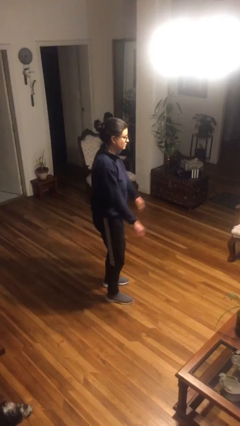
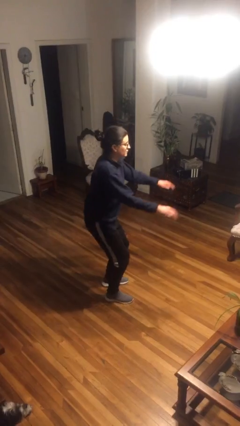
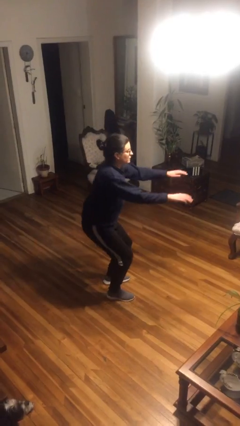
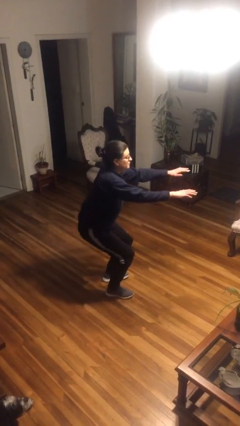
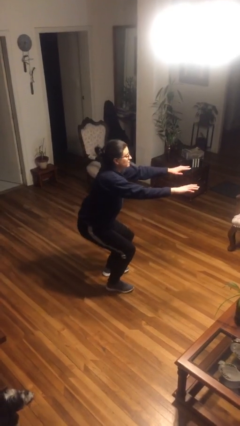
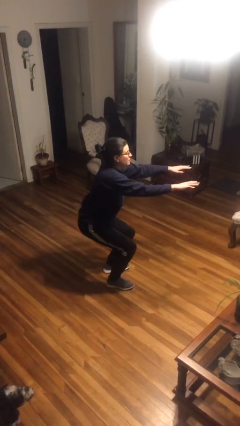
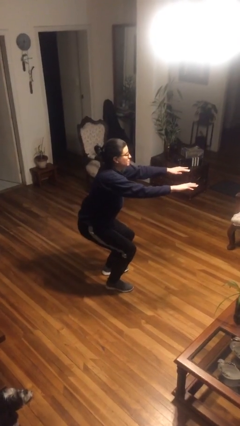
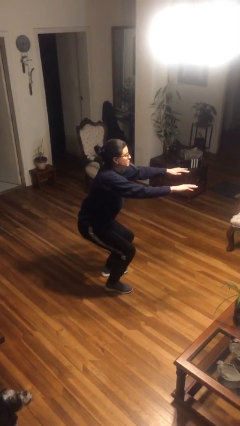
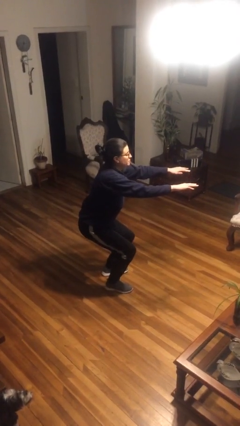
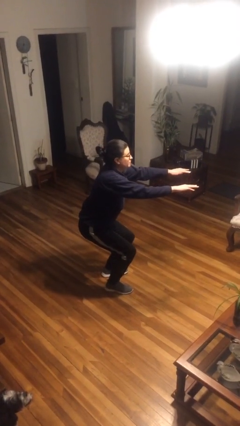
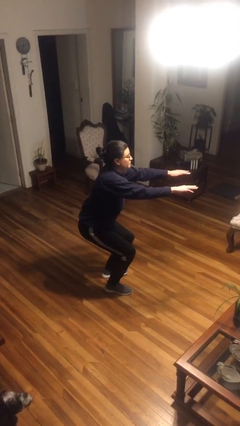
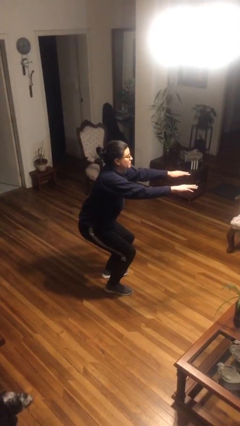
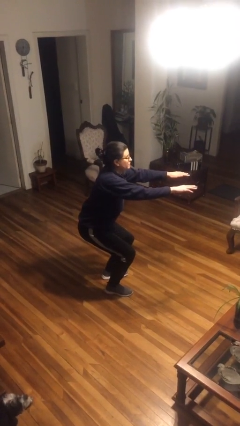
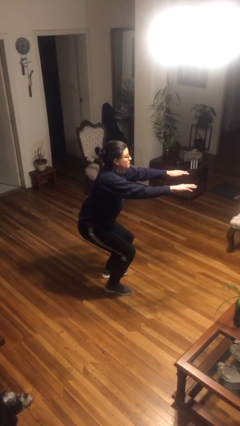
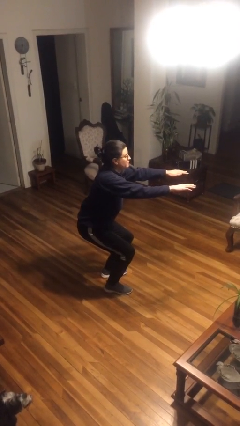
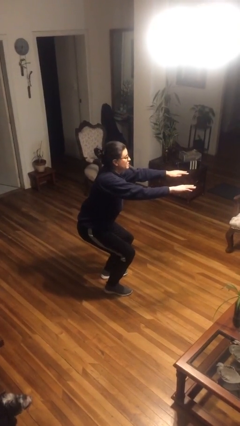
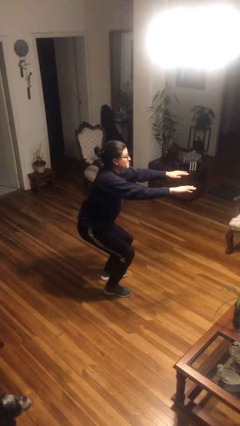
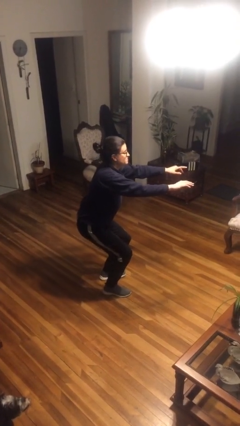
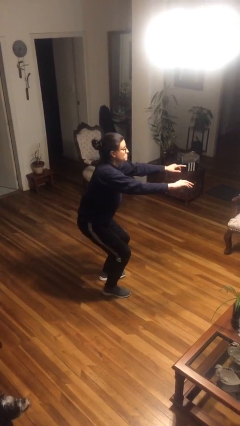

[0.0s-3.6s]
person squats

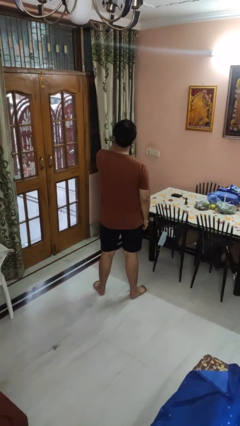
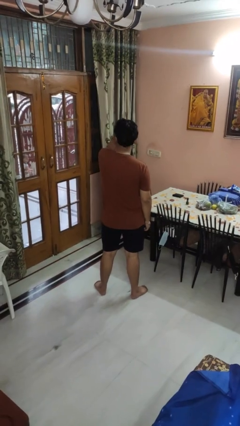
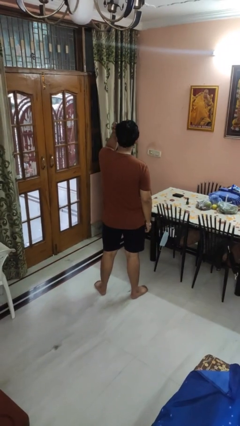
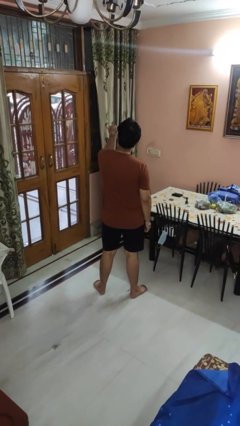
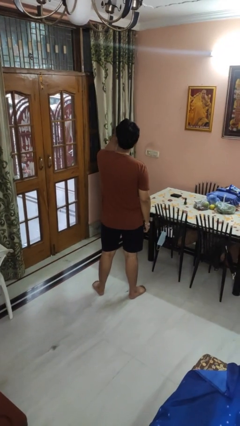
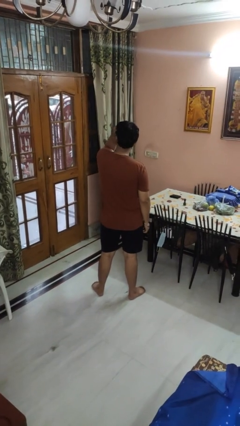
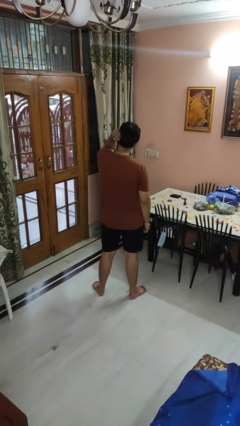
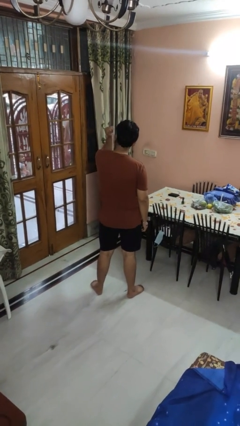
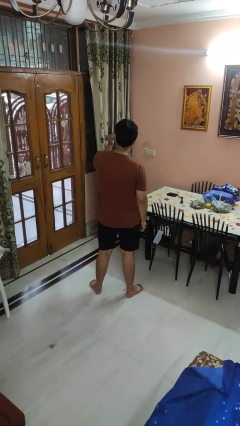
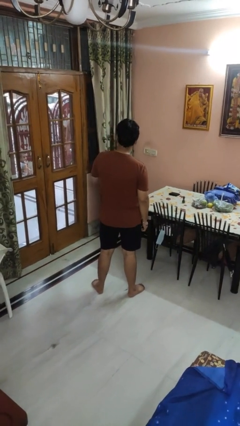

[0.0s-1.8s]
person strokes hair

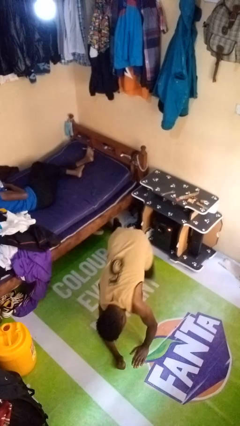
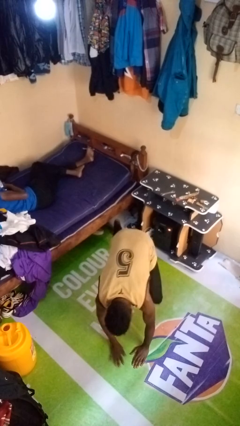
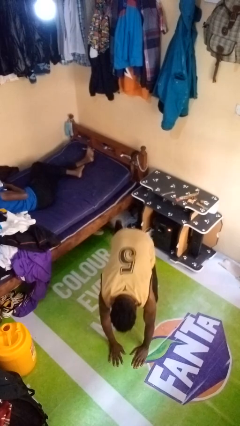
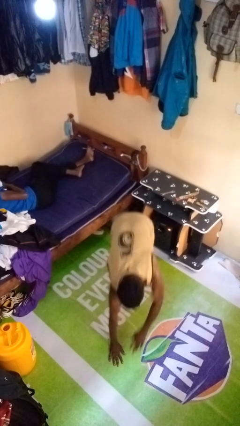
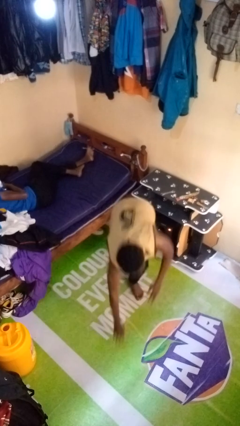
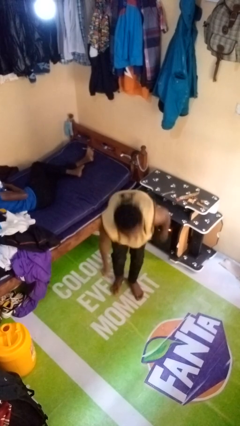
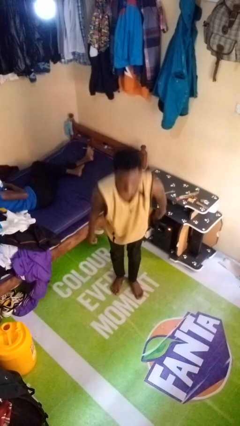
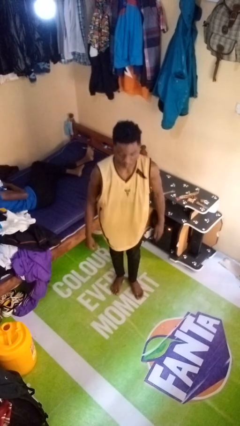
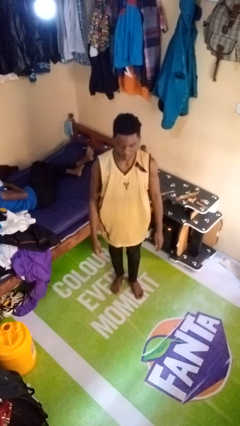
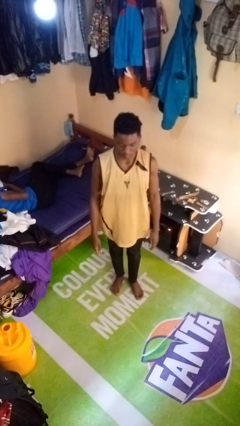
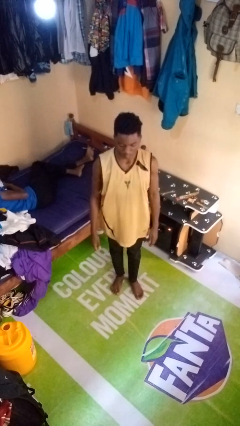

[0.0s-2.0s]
person stands up from floor

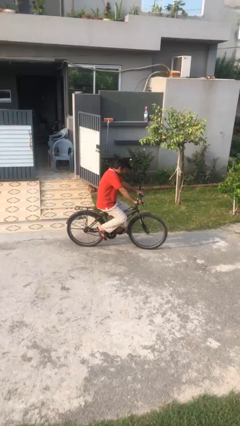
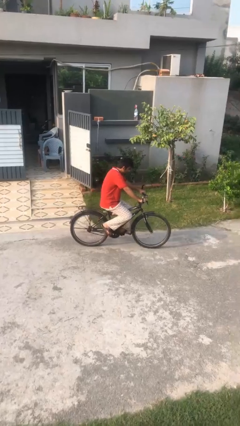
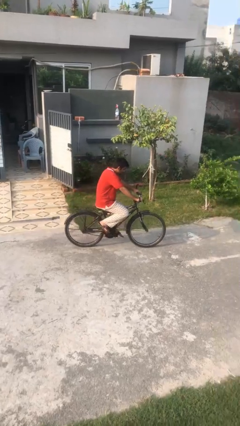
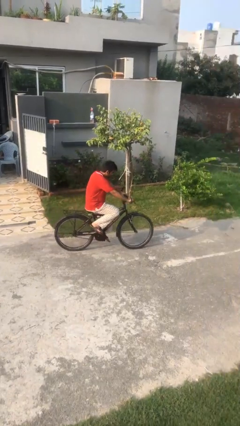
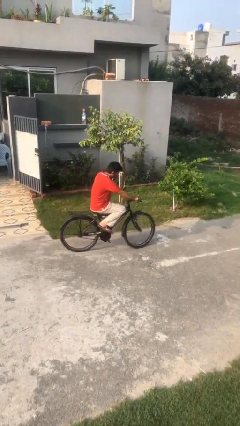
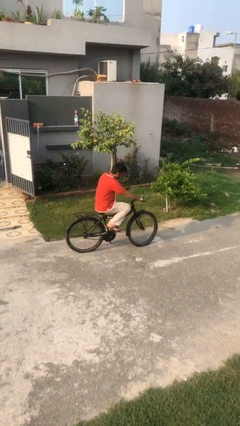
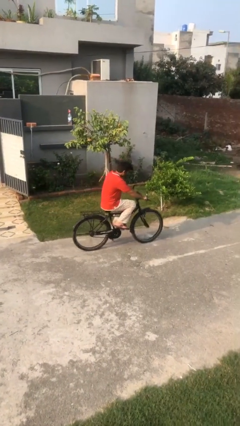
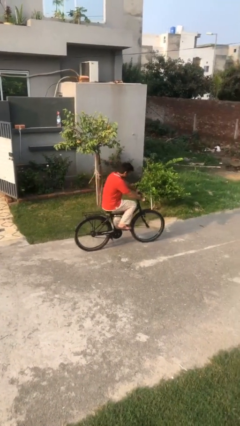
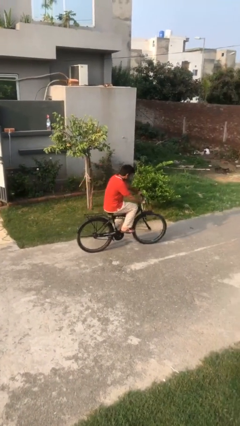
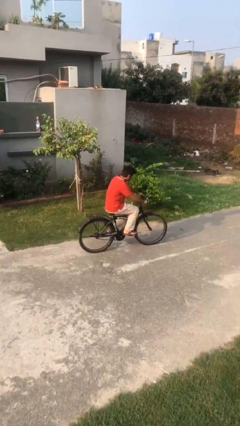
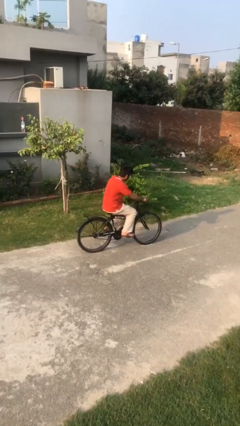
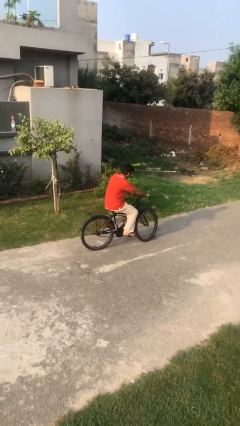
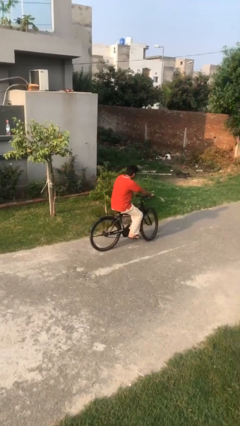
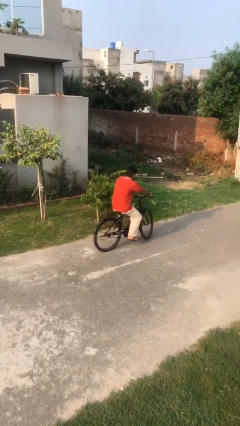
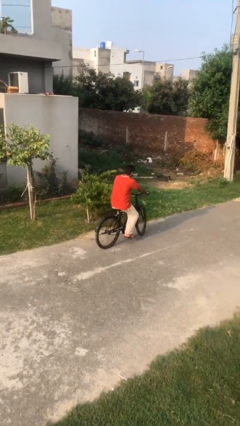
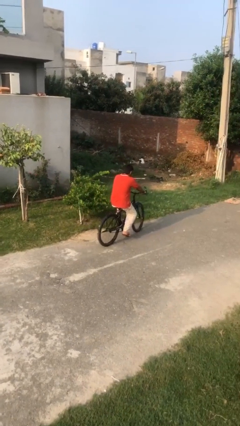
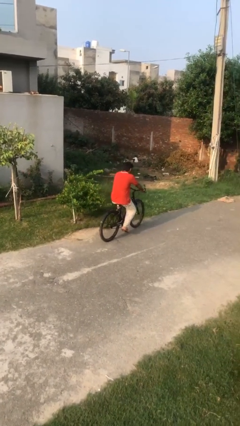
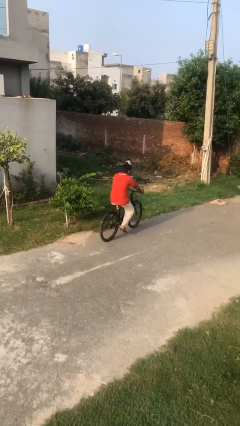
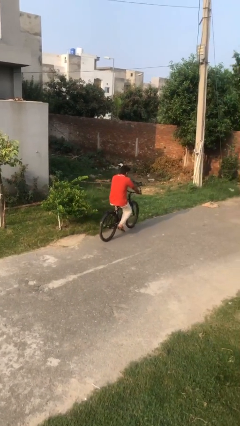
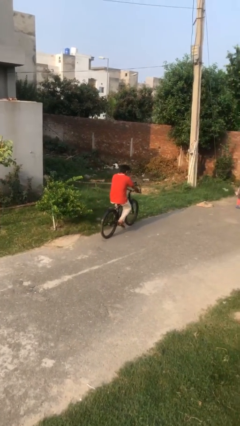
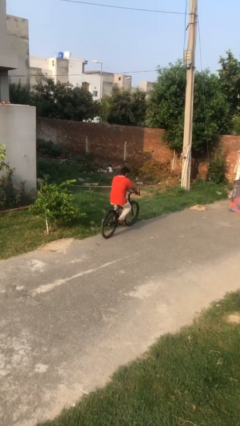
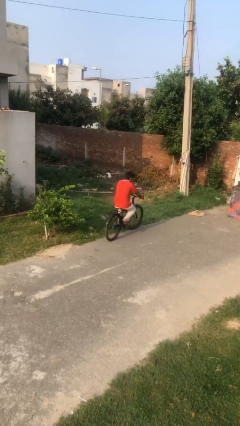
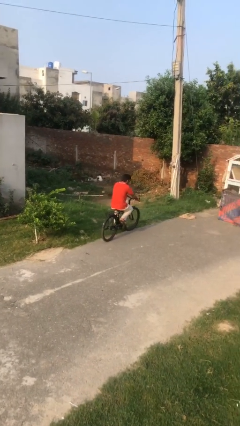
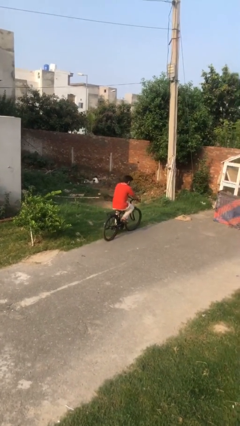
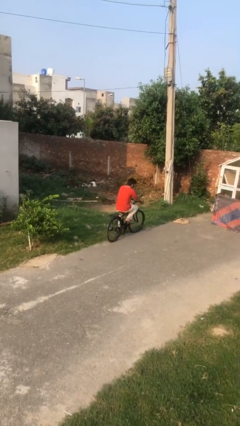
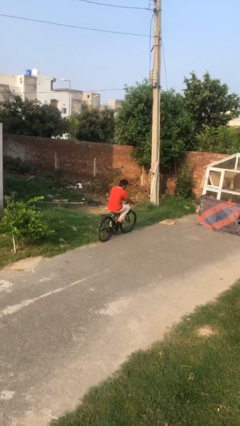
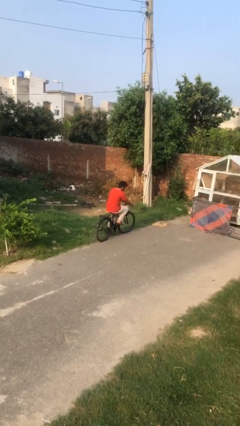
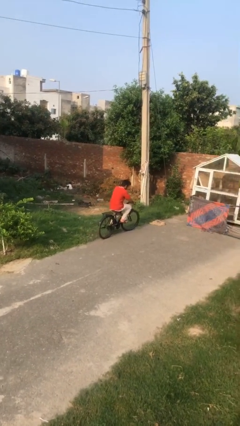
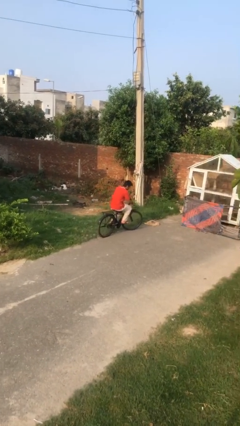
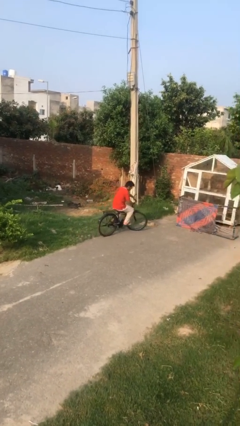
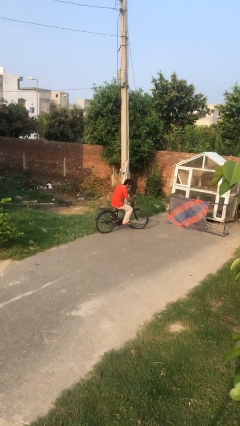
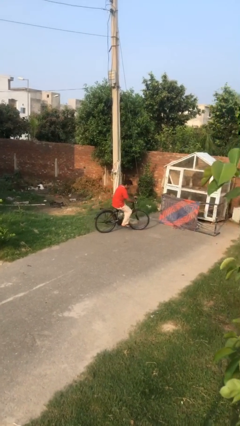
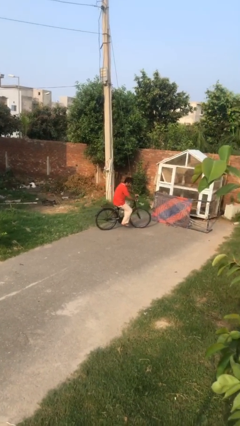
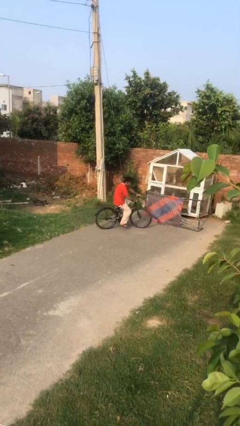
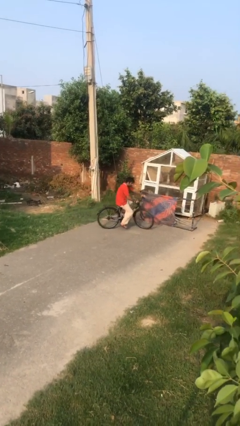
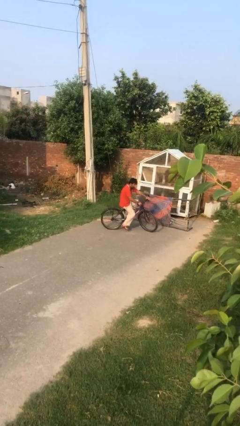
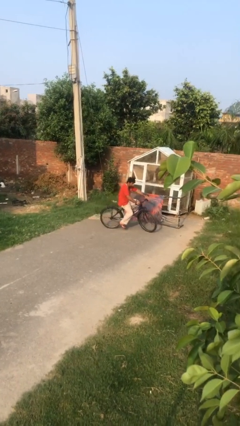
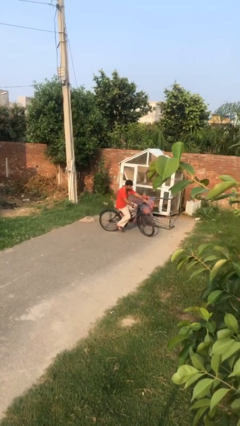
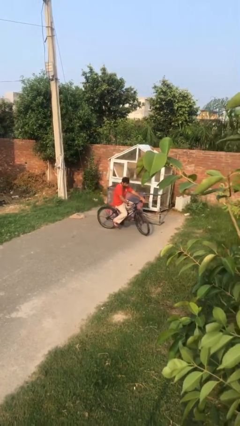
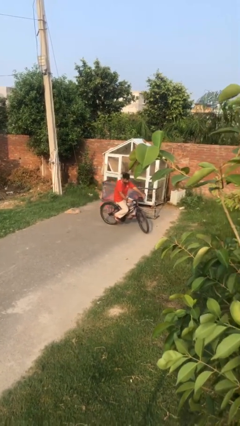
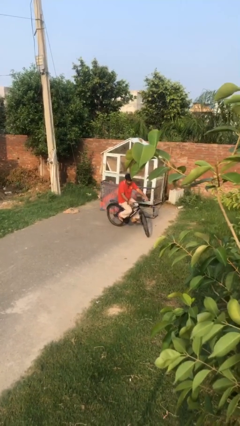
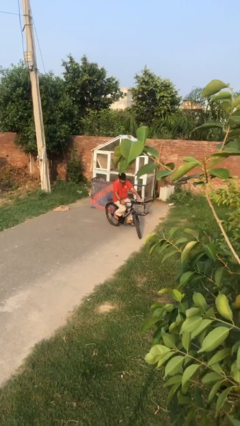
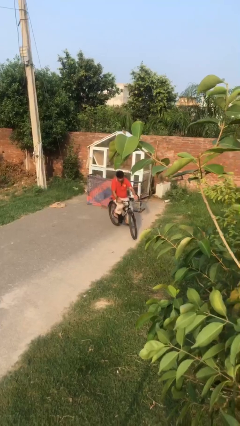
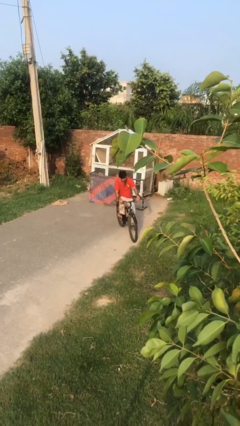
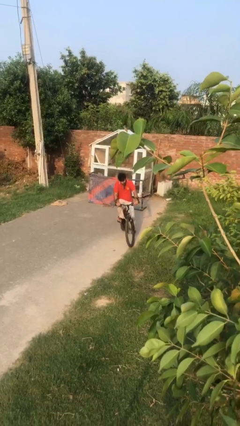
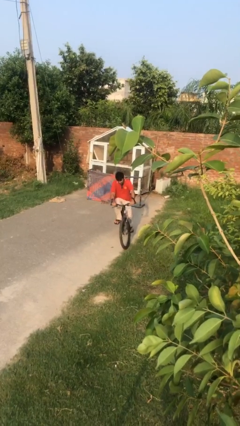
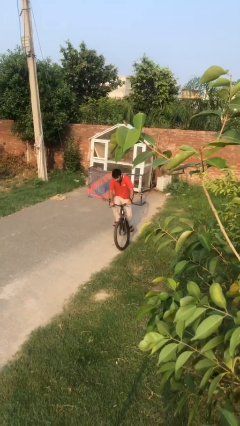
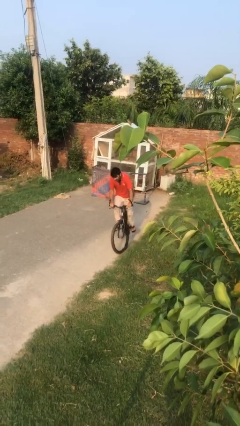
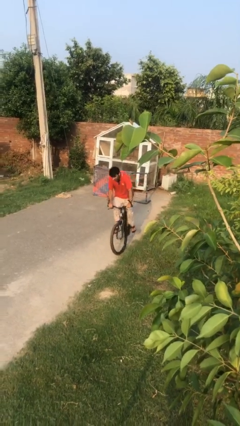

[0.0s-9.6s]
person rides bicycle

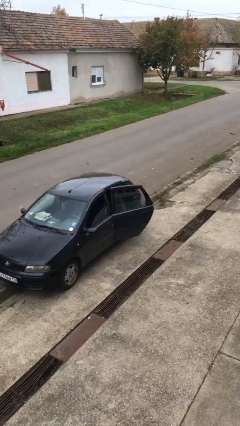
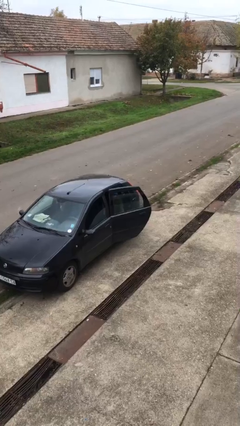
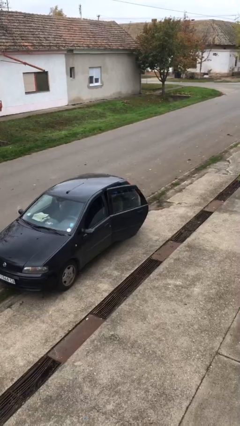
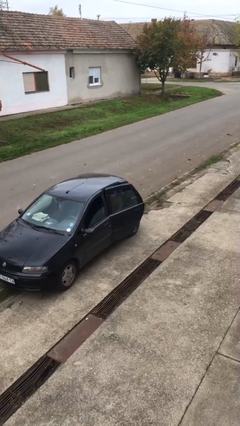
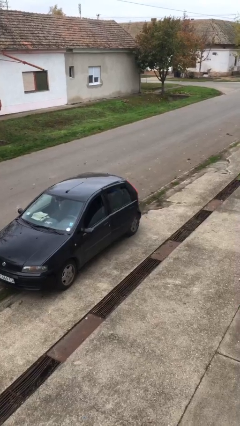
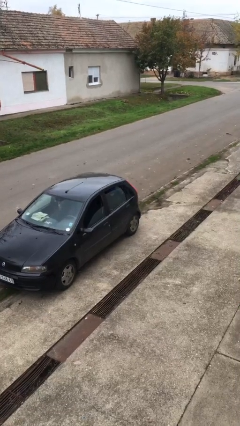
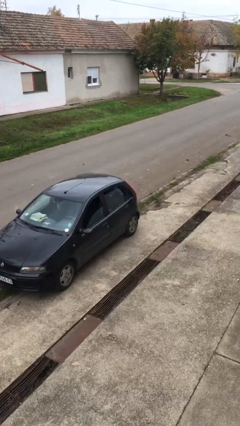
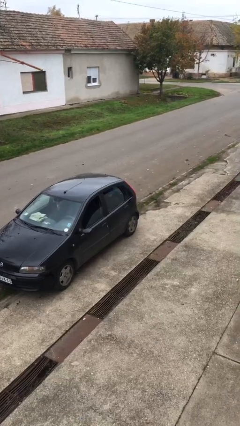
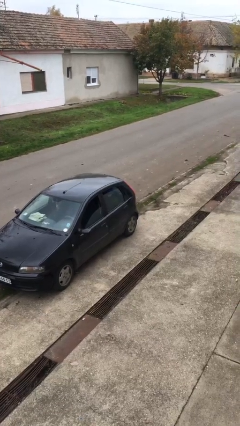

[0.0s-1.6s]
person closes car door
